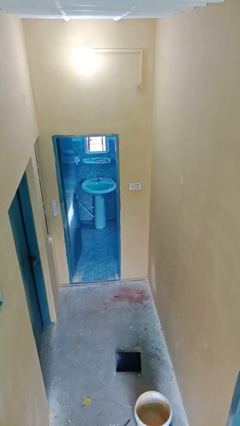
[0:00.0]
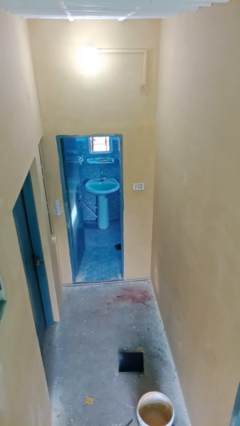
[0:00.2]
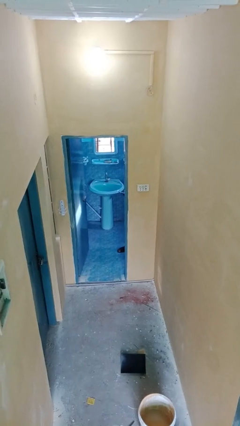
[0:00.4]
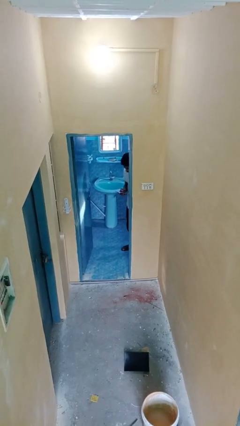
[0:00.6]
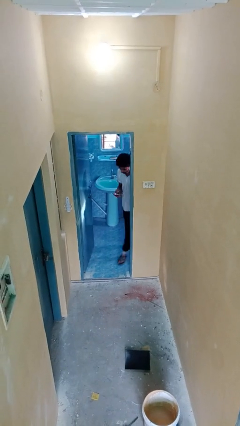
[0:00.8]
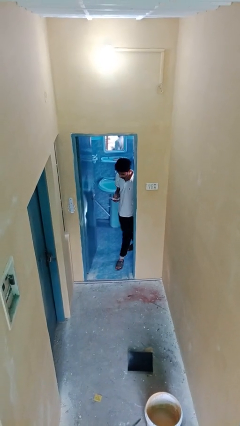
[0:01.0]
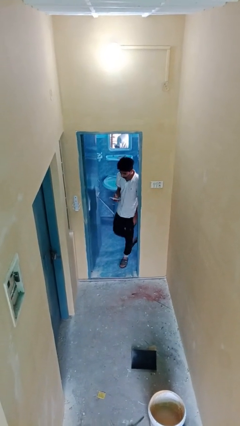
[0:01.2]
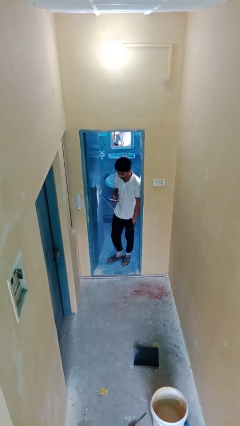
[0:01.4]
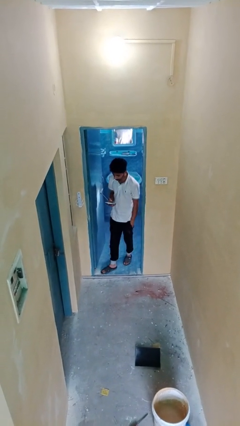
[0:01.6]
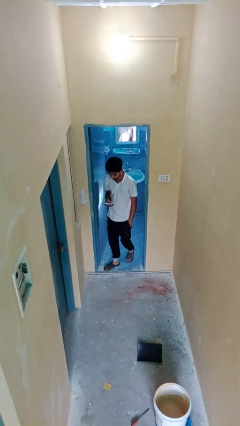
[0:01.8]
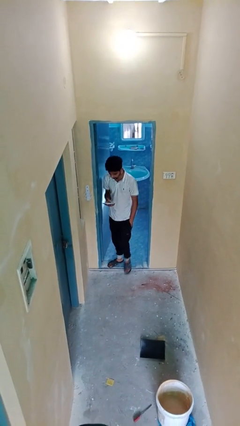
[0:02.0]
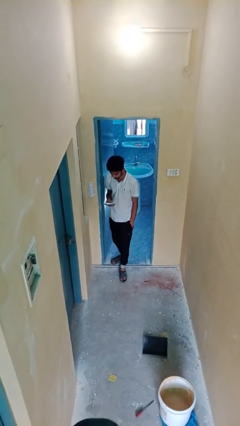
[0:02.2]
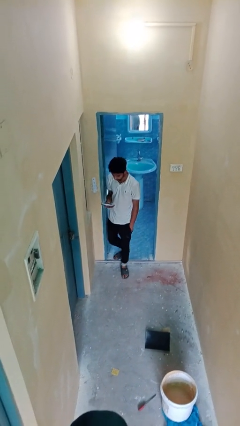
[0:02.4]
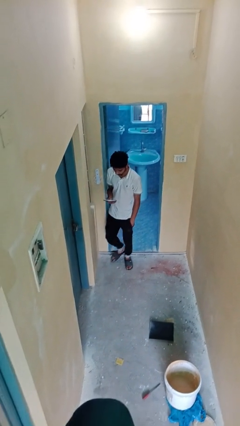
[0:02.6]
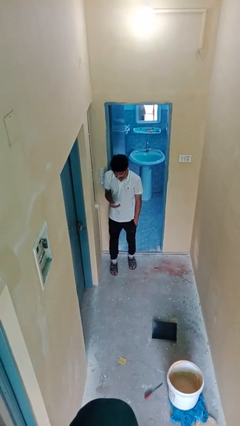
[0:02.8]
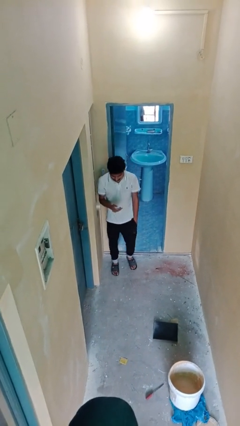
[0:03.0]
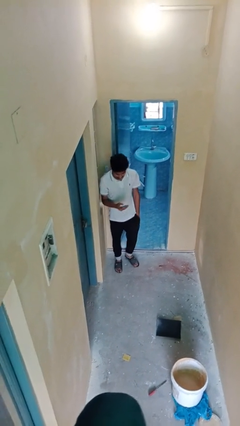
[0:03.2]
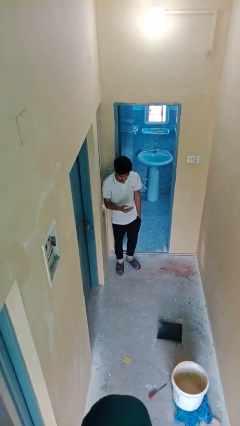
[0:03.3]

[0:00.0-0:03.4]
person enters scene through structure

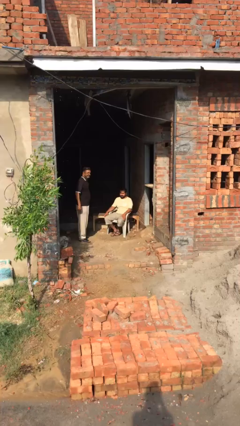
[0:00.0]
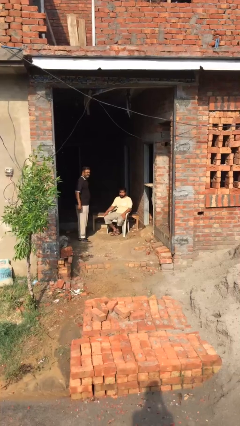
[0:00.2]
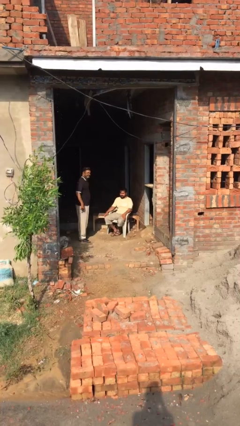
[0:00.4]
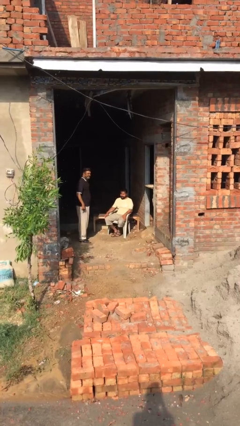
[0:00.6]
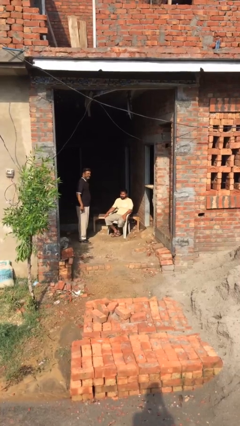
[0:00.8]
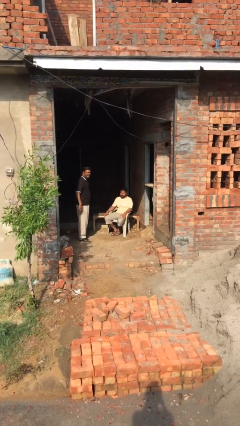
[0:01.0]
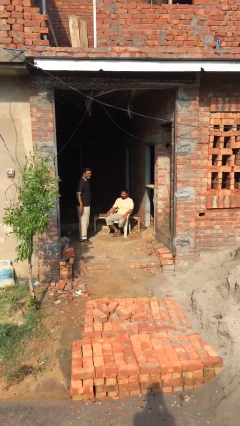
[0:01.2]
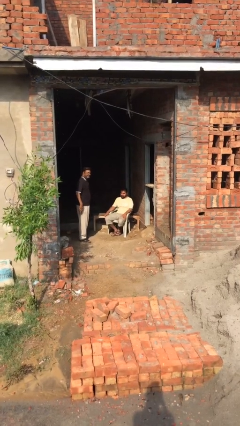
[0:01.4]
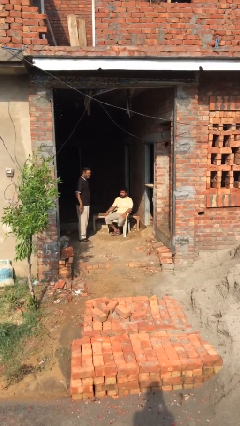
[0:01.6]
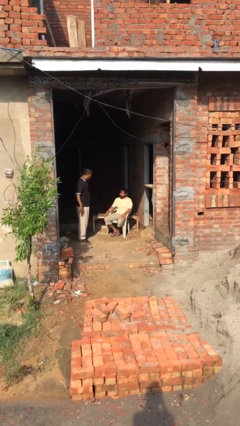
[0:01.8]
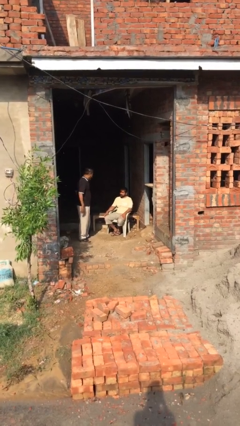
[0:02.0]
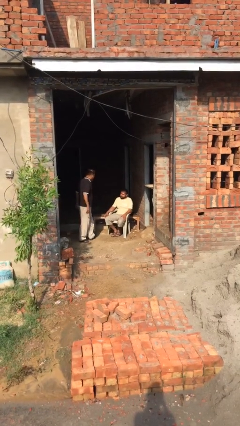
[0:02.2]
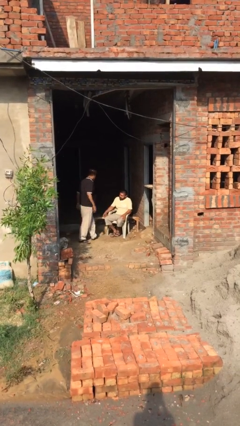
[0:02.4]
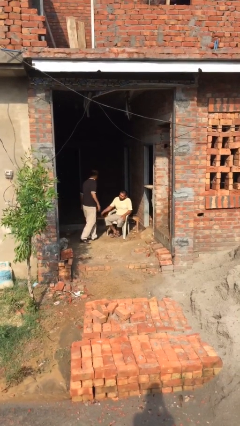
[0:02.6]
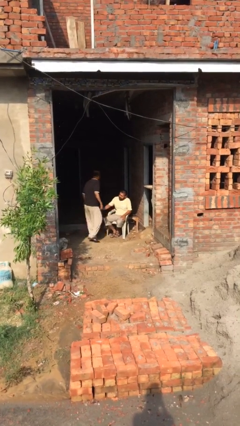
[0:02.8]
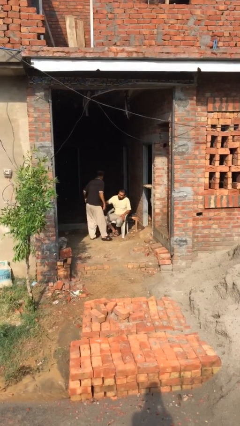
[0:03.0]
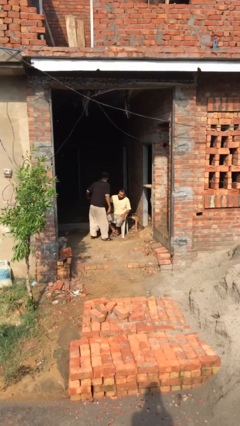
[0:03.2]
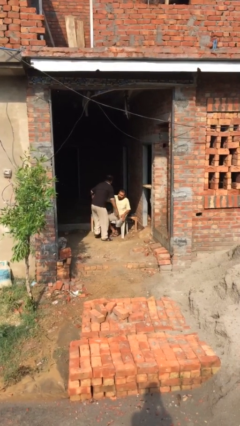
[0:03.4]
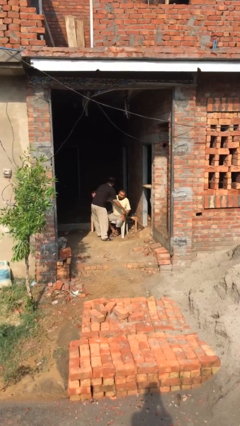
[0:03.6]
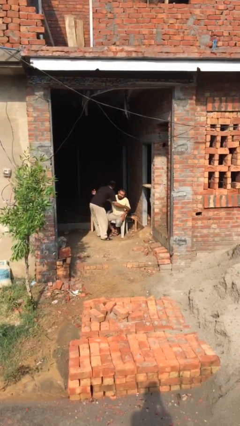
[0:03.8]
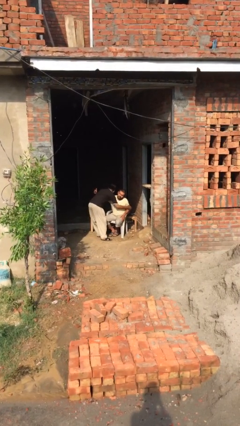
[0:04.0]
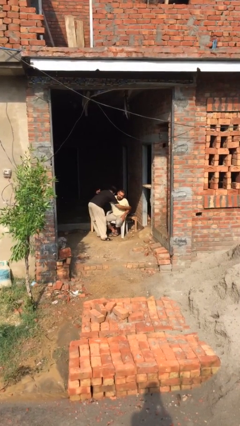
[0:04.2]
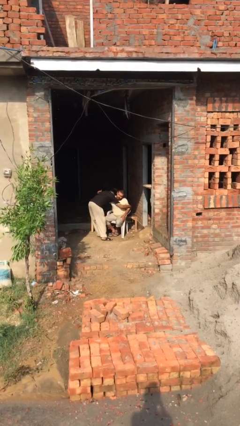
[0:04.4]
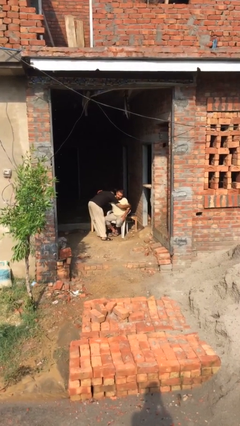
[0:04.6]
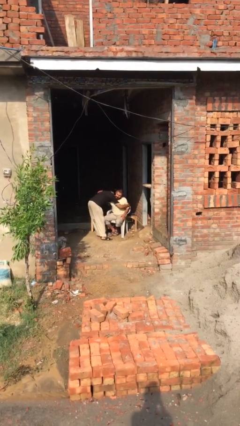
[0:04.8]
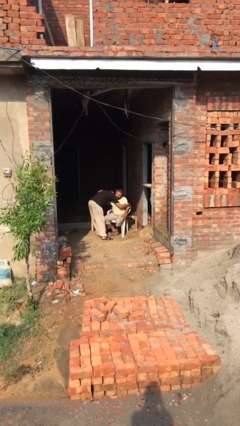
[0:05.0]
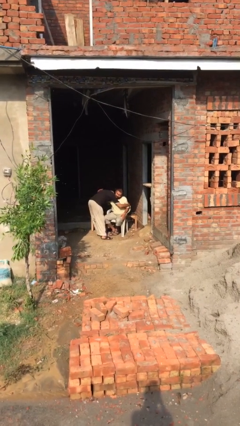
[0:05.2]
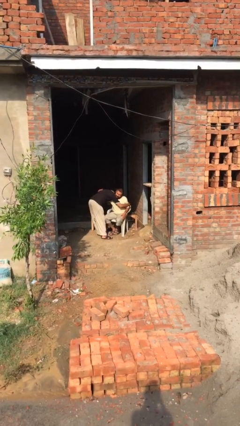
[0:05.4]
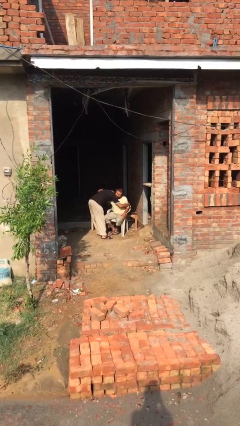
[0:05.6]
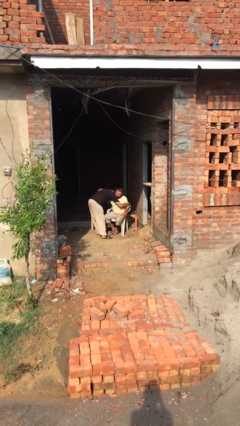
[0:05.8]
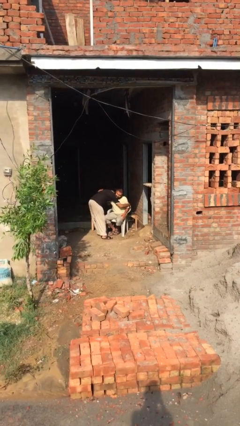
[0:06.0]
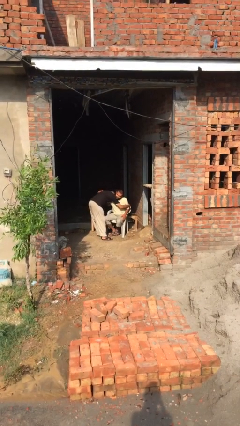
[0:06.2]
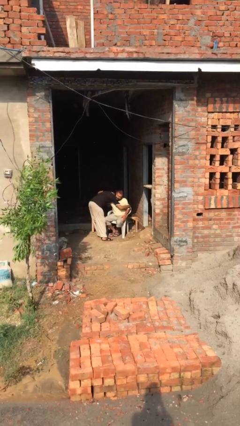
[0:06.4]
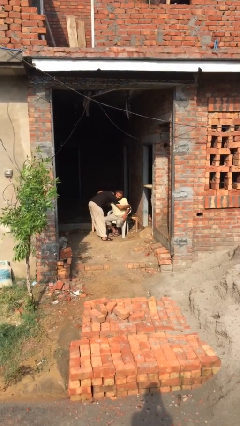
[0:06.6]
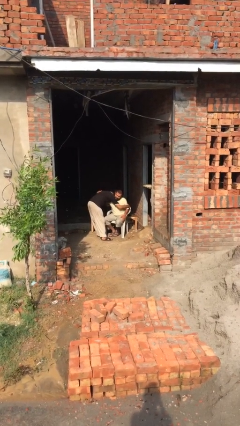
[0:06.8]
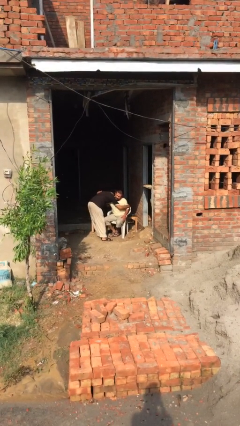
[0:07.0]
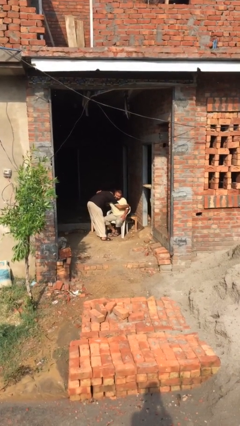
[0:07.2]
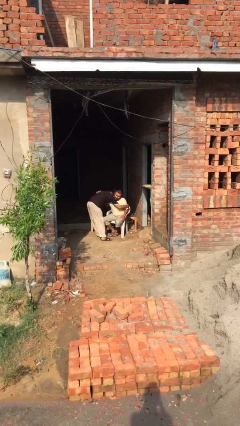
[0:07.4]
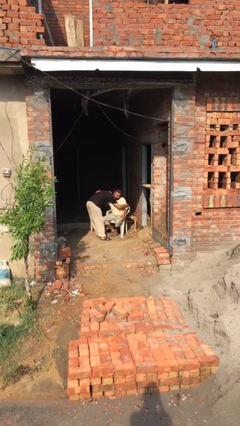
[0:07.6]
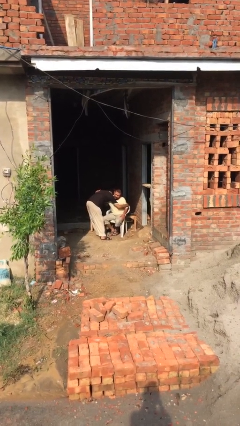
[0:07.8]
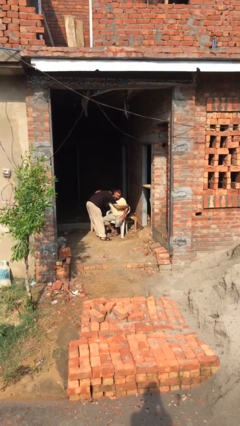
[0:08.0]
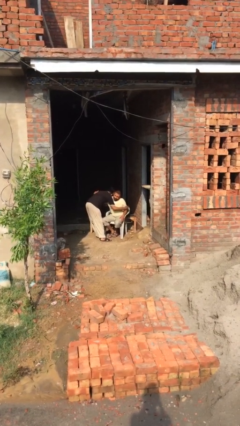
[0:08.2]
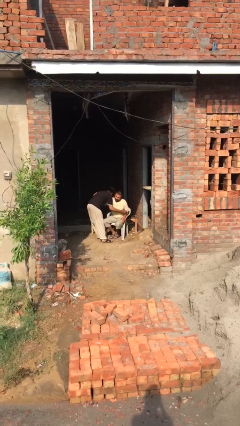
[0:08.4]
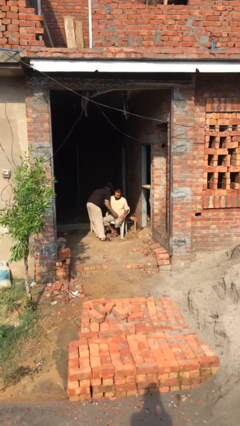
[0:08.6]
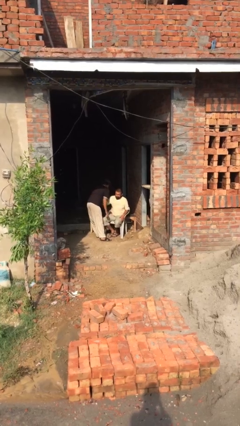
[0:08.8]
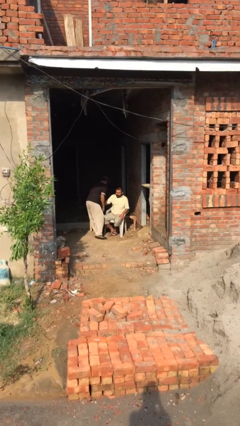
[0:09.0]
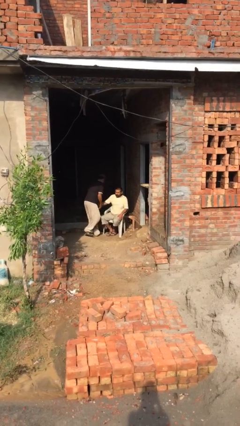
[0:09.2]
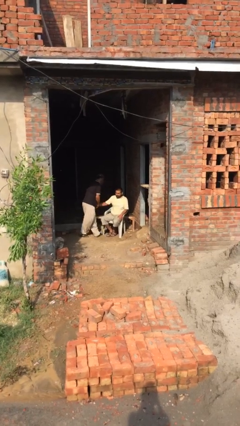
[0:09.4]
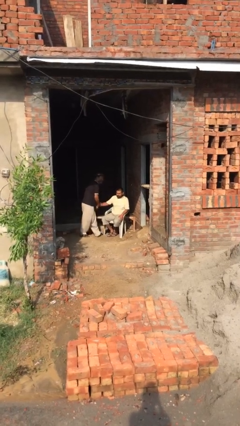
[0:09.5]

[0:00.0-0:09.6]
person embraces person

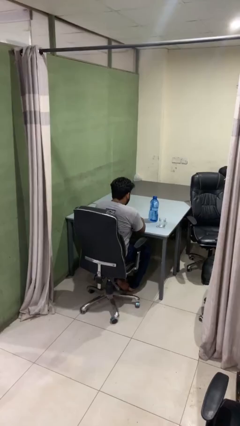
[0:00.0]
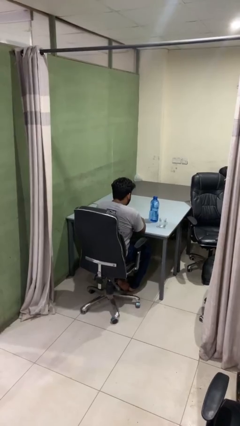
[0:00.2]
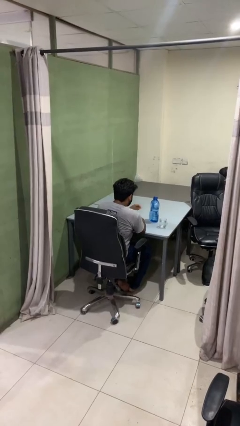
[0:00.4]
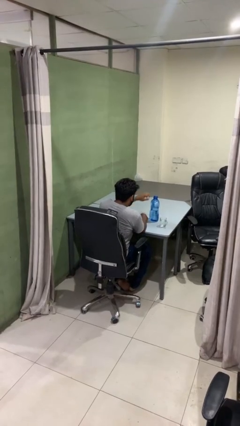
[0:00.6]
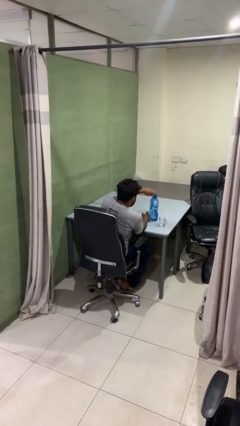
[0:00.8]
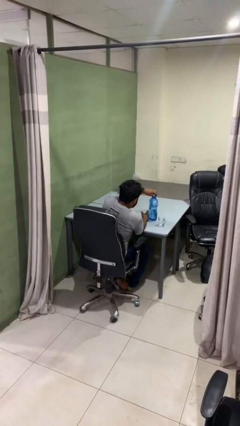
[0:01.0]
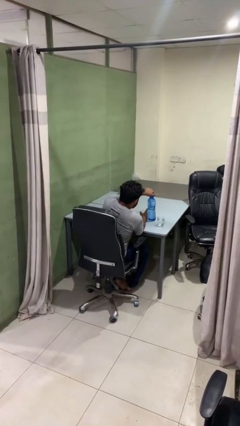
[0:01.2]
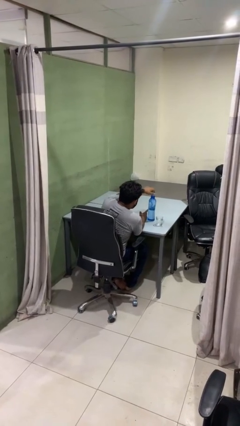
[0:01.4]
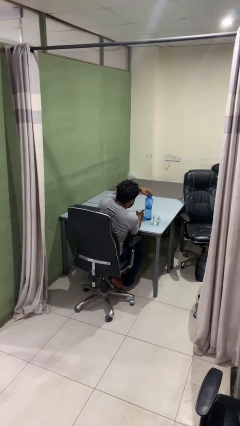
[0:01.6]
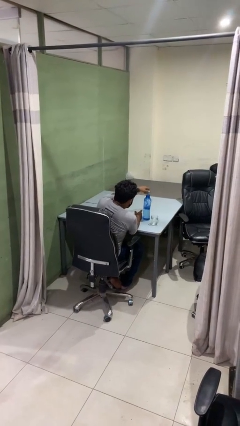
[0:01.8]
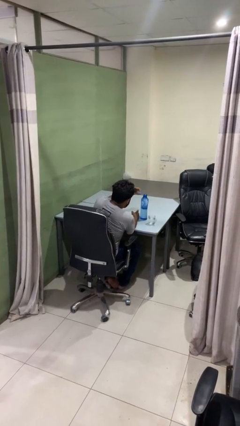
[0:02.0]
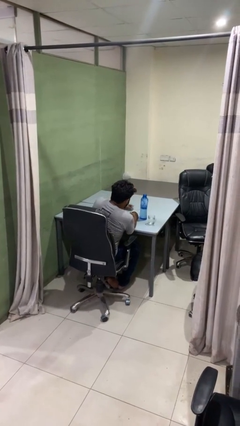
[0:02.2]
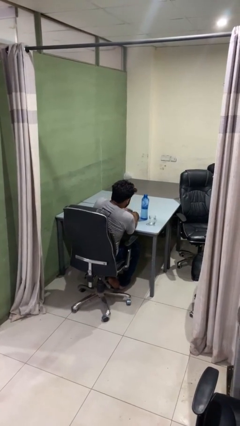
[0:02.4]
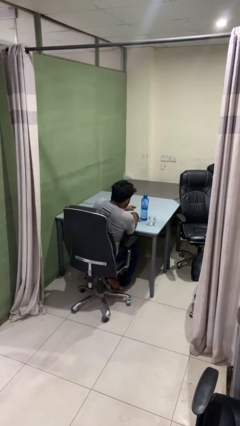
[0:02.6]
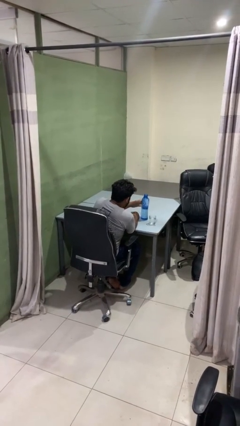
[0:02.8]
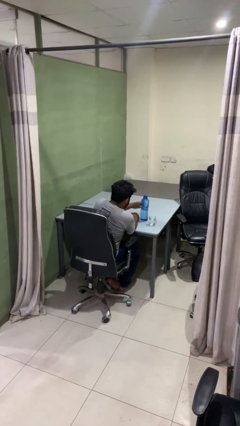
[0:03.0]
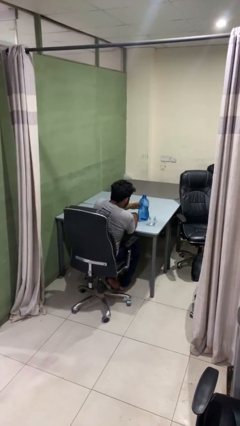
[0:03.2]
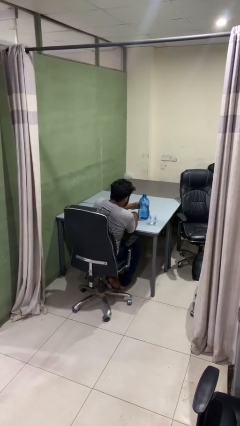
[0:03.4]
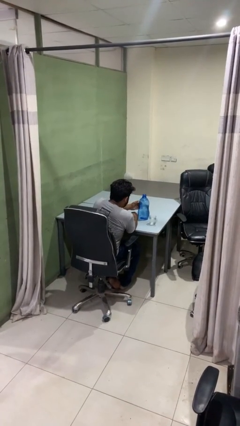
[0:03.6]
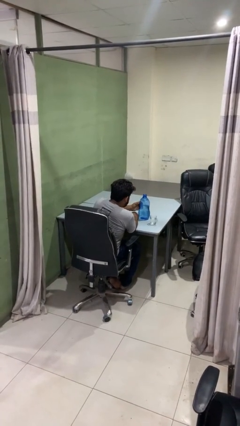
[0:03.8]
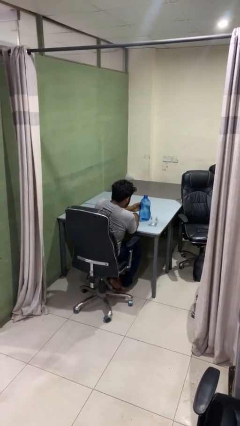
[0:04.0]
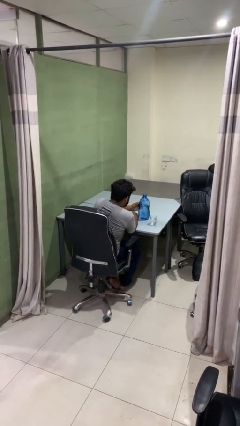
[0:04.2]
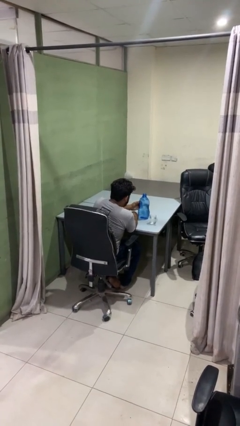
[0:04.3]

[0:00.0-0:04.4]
person unscrews lid from bottle

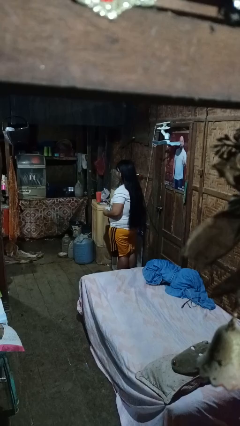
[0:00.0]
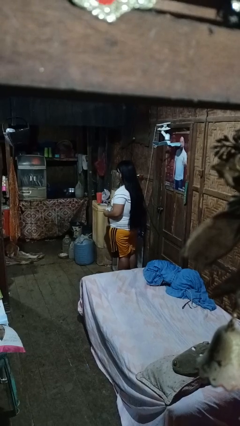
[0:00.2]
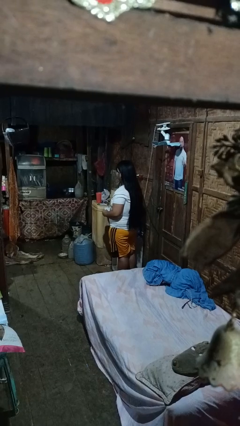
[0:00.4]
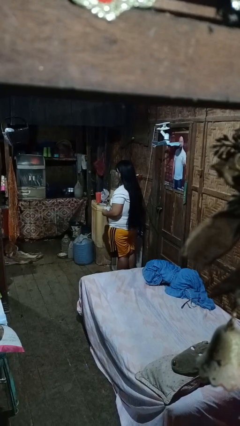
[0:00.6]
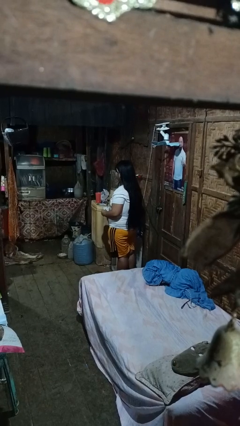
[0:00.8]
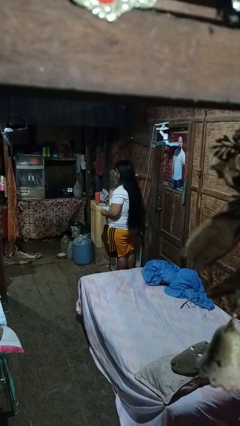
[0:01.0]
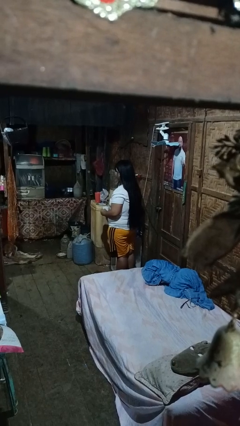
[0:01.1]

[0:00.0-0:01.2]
person stirs mug
